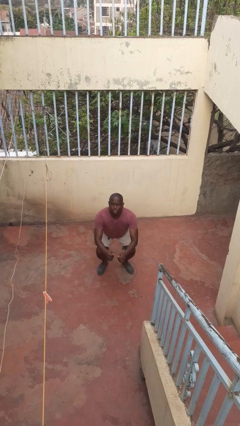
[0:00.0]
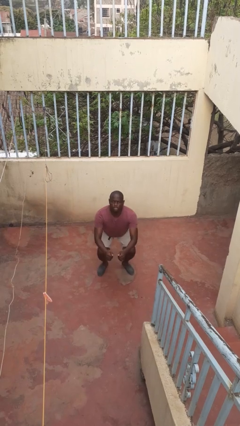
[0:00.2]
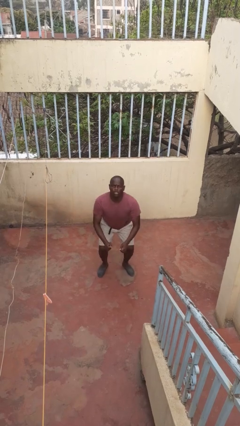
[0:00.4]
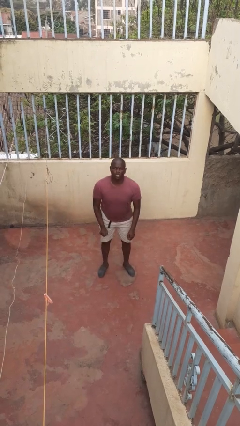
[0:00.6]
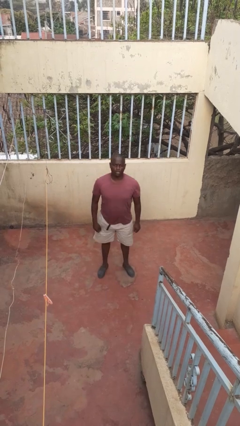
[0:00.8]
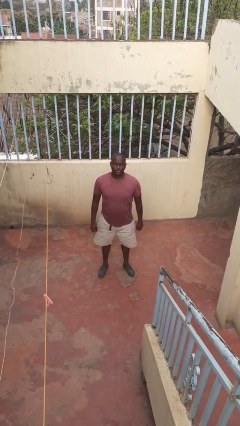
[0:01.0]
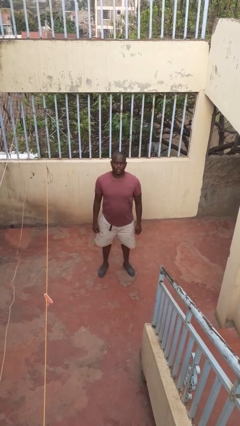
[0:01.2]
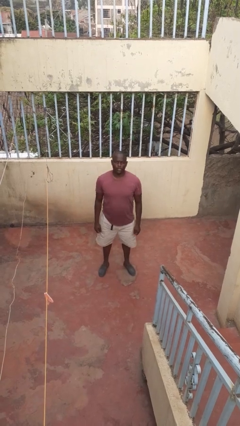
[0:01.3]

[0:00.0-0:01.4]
person stands up

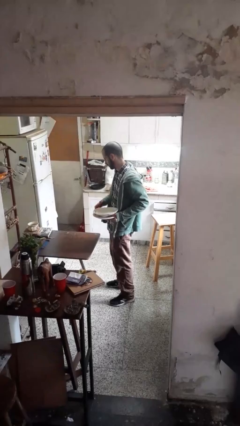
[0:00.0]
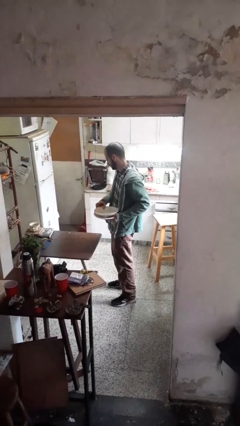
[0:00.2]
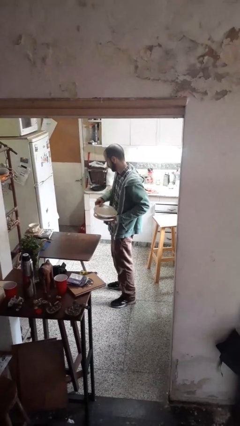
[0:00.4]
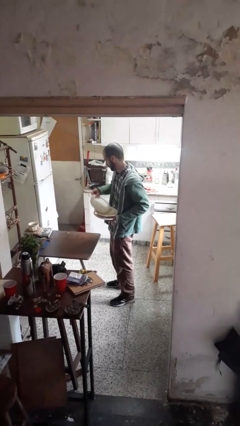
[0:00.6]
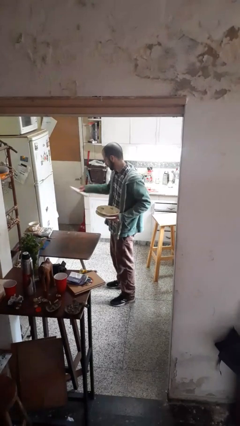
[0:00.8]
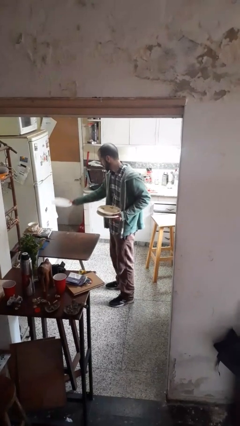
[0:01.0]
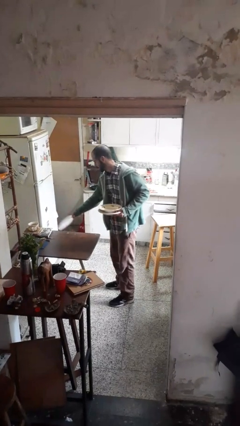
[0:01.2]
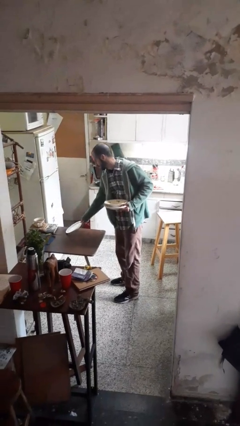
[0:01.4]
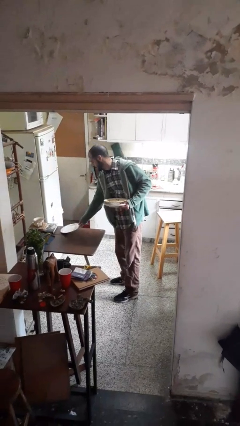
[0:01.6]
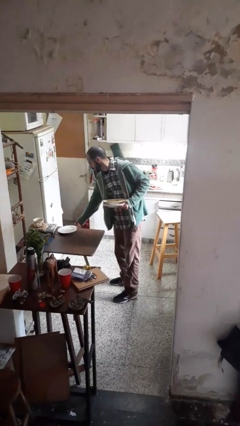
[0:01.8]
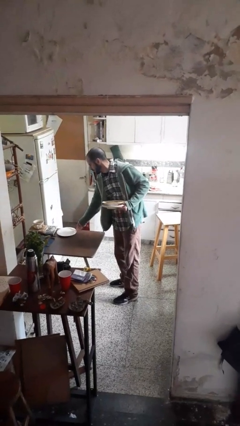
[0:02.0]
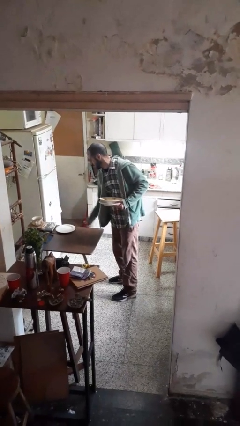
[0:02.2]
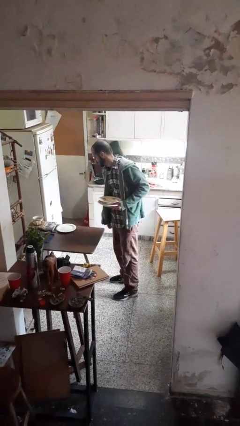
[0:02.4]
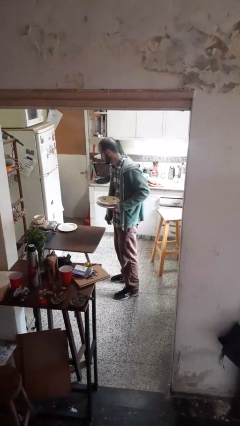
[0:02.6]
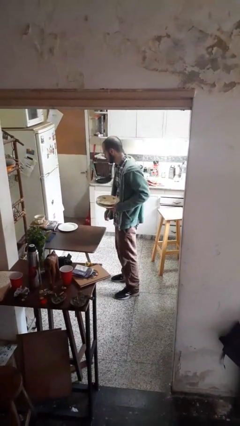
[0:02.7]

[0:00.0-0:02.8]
person sets table

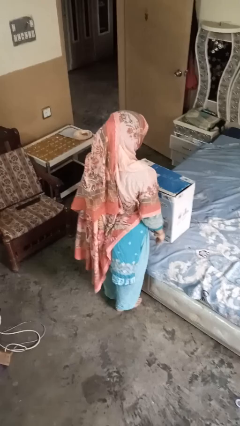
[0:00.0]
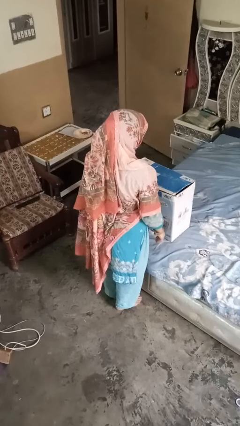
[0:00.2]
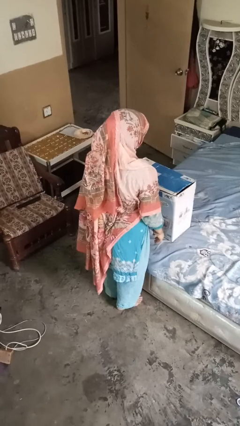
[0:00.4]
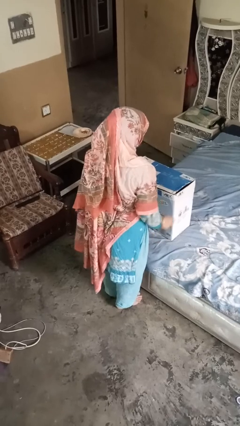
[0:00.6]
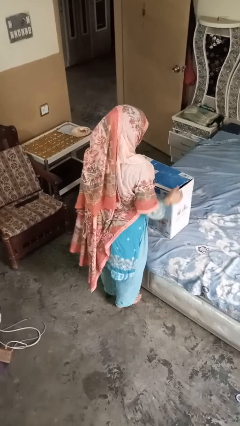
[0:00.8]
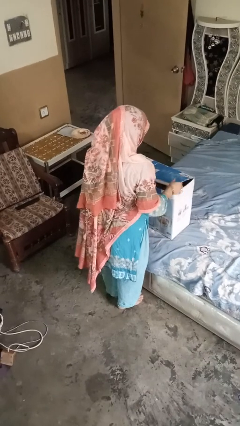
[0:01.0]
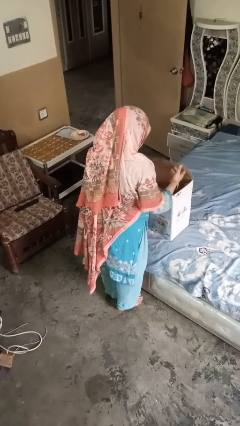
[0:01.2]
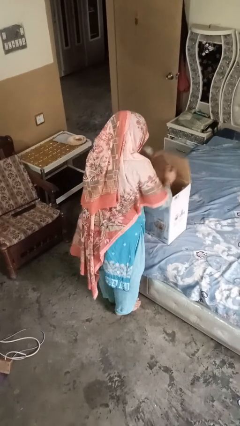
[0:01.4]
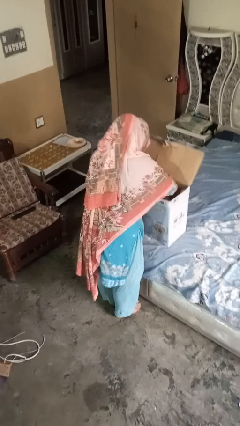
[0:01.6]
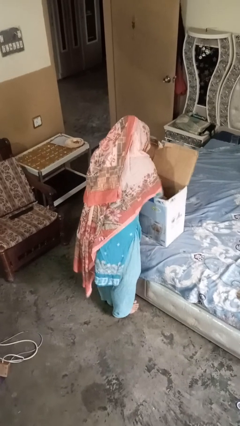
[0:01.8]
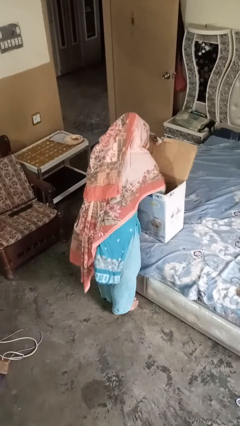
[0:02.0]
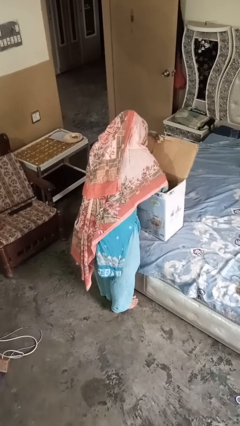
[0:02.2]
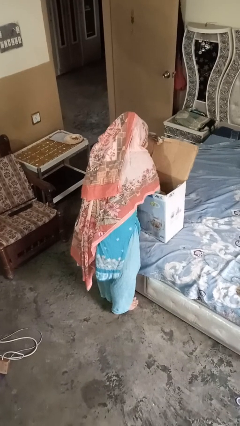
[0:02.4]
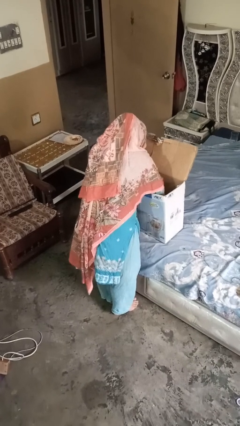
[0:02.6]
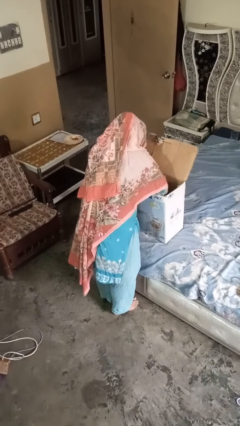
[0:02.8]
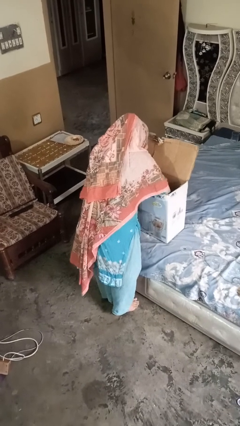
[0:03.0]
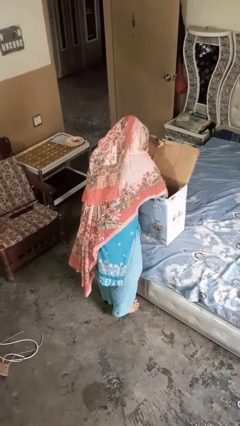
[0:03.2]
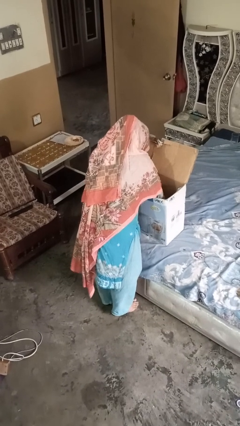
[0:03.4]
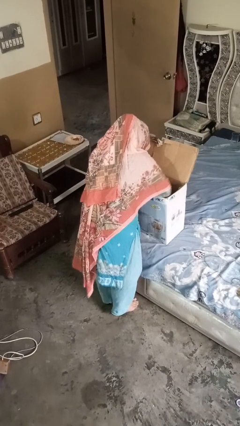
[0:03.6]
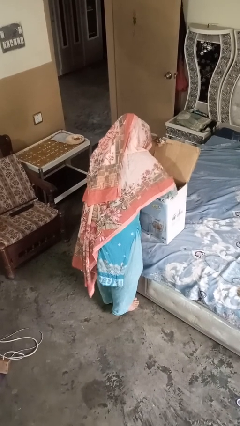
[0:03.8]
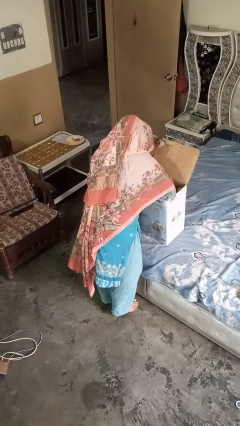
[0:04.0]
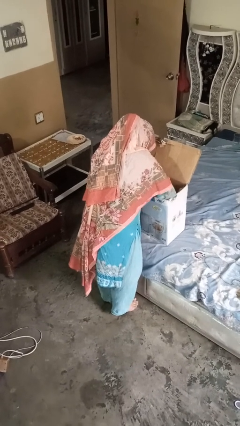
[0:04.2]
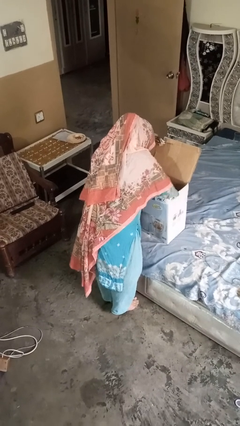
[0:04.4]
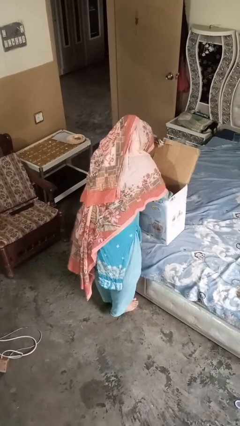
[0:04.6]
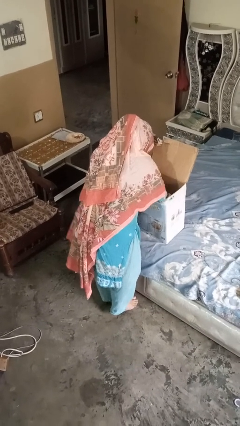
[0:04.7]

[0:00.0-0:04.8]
person searches in box

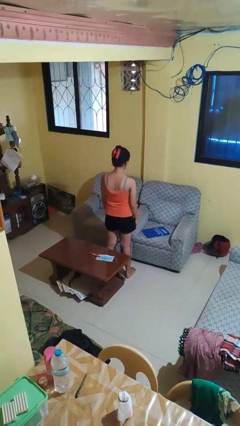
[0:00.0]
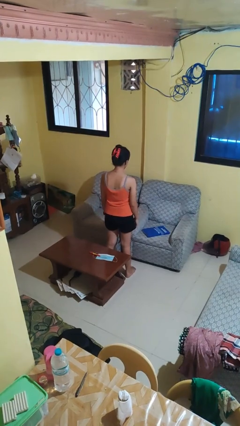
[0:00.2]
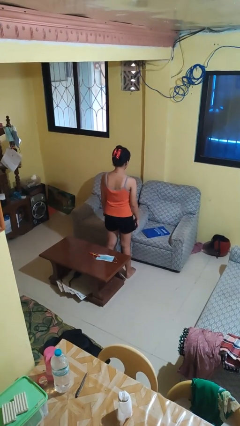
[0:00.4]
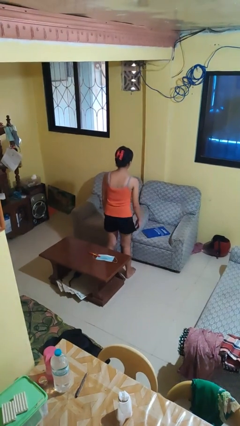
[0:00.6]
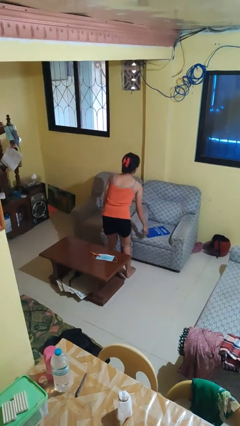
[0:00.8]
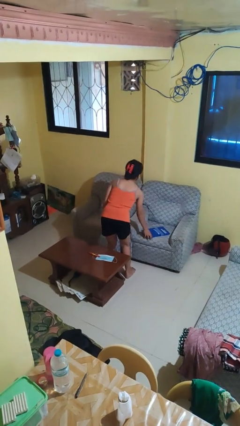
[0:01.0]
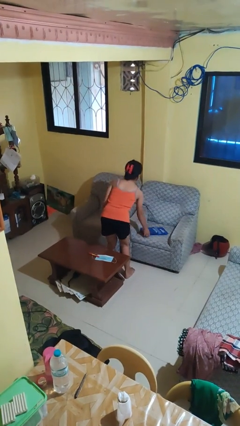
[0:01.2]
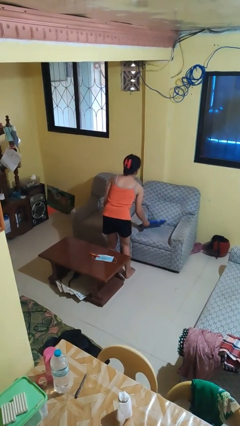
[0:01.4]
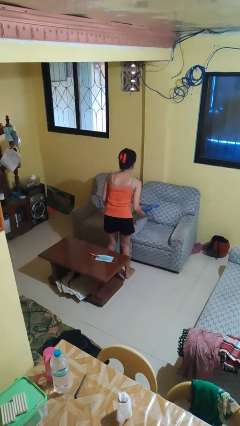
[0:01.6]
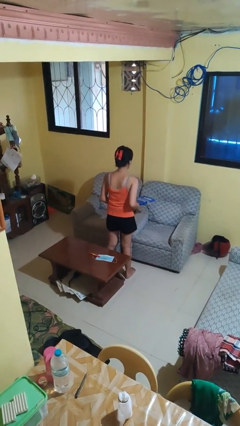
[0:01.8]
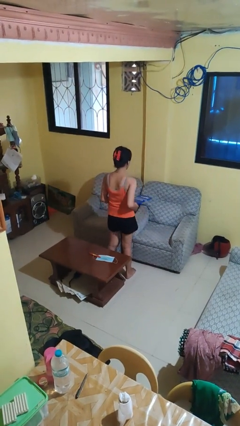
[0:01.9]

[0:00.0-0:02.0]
person picks up object from couch

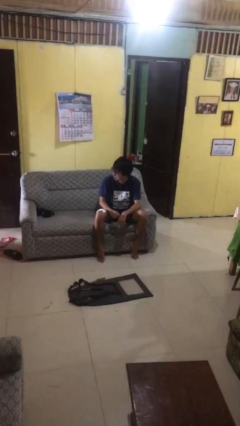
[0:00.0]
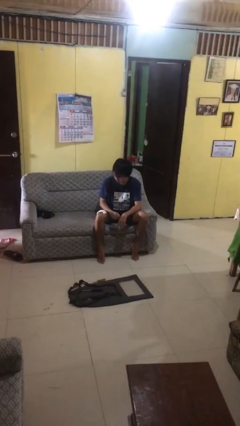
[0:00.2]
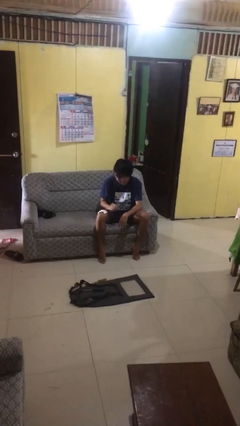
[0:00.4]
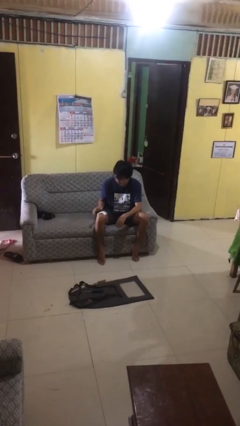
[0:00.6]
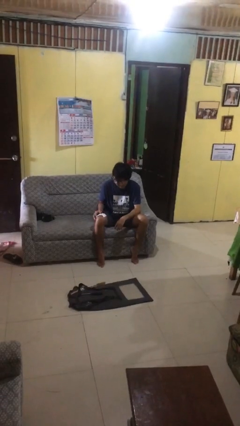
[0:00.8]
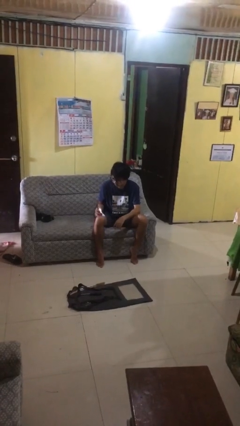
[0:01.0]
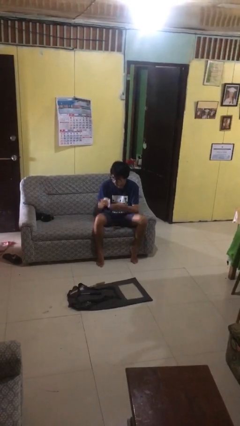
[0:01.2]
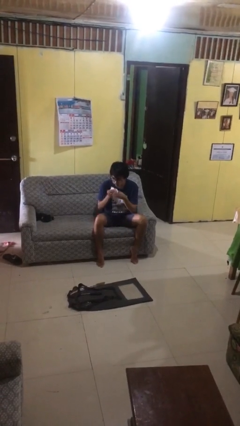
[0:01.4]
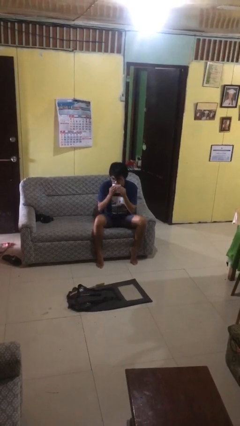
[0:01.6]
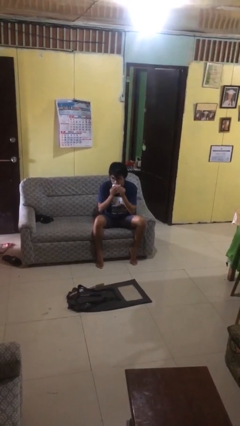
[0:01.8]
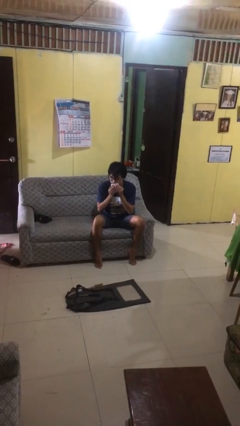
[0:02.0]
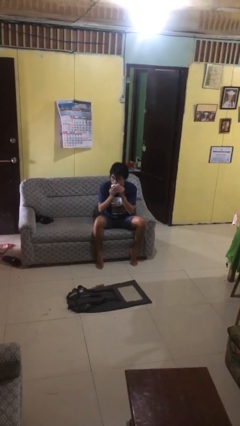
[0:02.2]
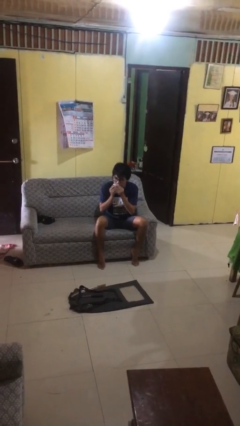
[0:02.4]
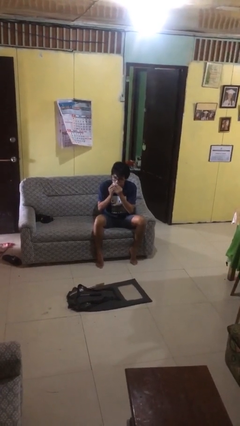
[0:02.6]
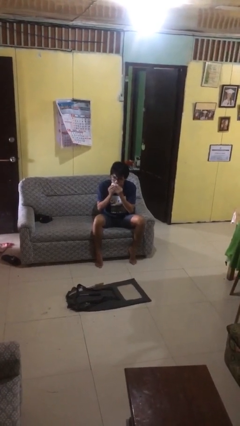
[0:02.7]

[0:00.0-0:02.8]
person wipes mouth with napkin

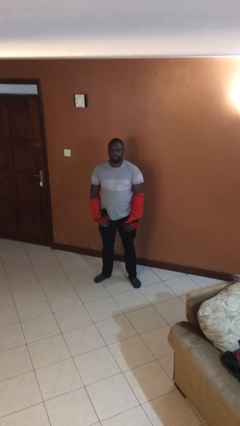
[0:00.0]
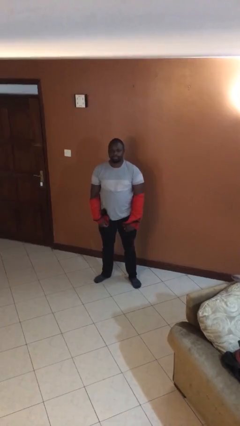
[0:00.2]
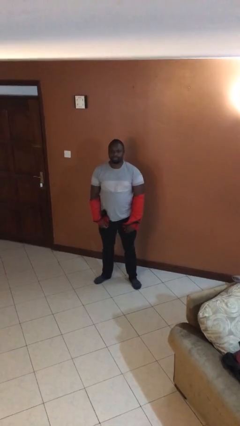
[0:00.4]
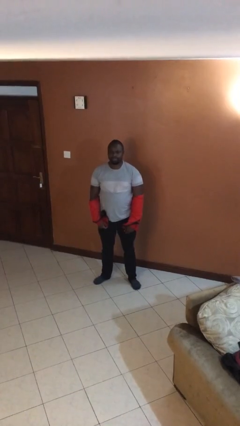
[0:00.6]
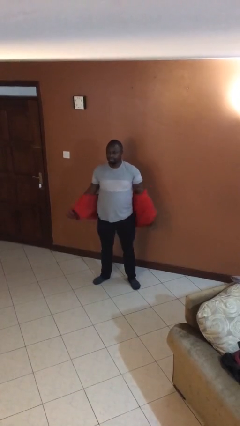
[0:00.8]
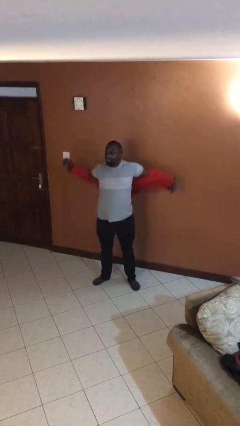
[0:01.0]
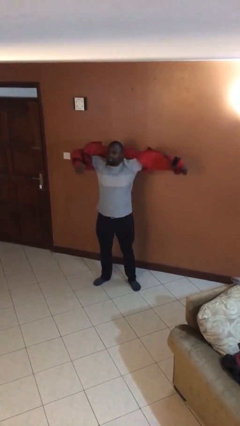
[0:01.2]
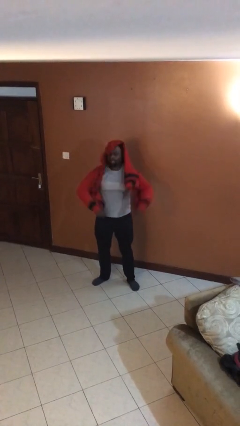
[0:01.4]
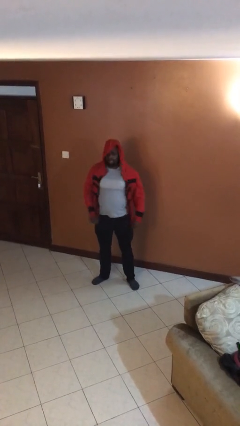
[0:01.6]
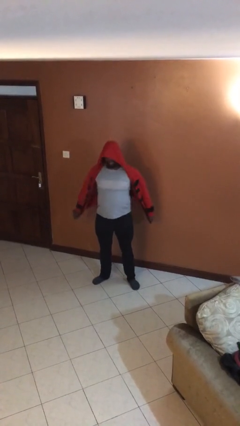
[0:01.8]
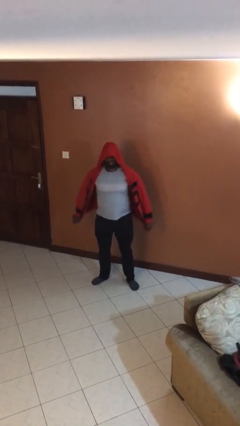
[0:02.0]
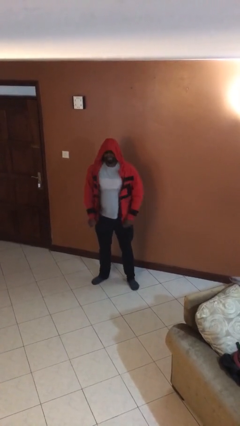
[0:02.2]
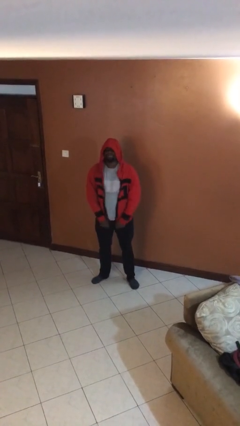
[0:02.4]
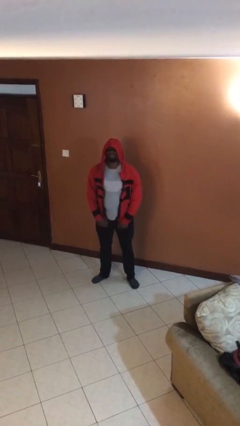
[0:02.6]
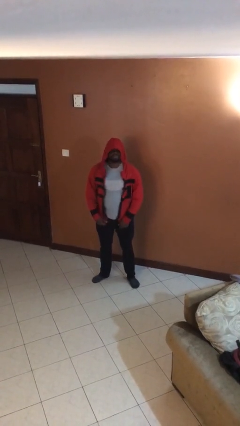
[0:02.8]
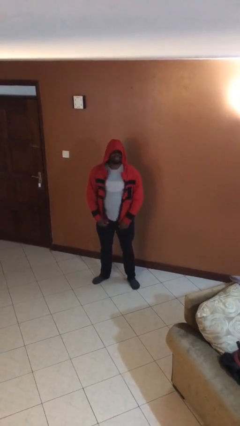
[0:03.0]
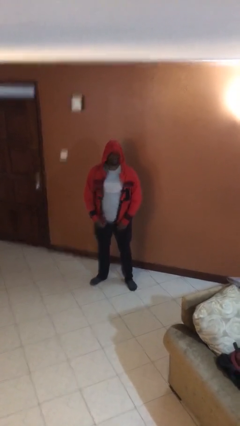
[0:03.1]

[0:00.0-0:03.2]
person puts on jacket

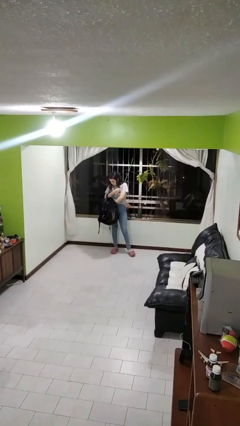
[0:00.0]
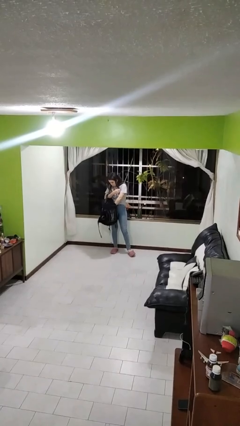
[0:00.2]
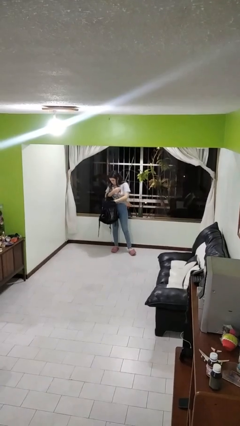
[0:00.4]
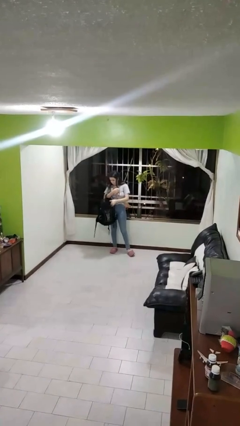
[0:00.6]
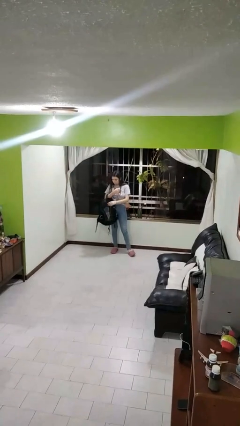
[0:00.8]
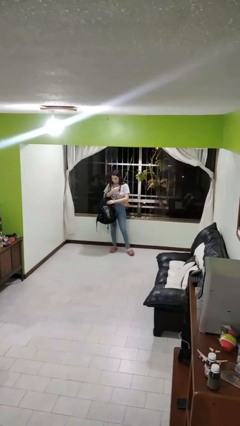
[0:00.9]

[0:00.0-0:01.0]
person puts object into backpack
